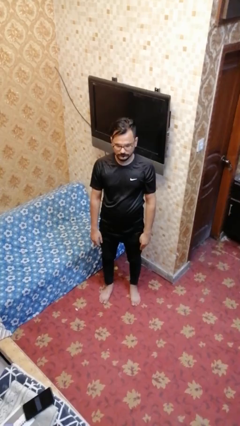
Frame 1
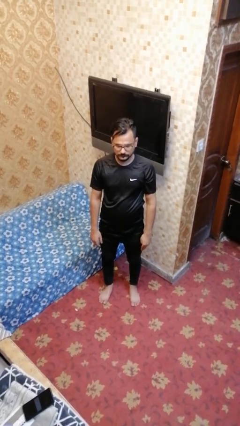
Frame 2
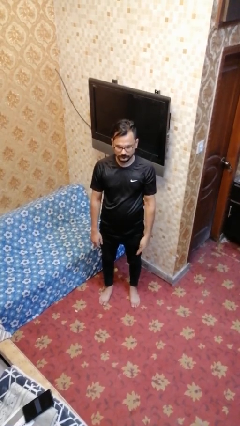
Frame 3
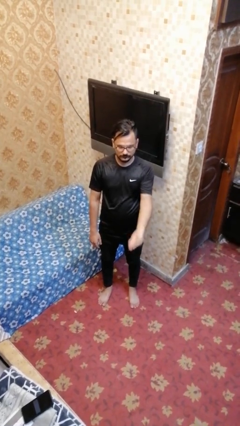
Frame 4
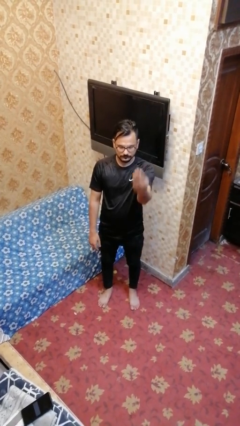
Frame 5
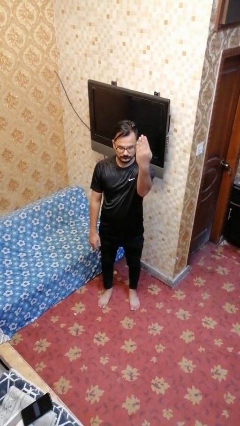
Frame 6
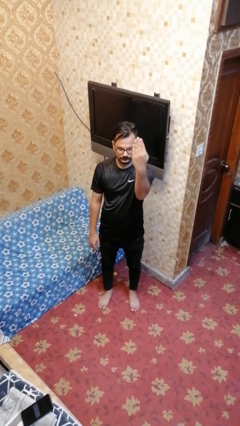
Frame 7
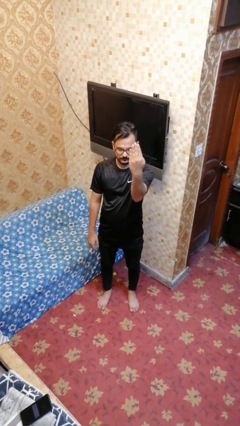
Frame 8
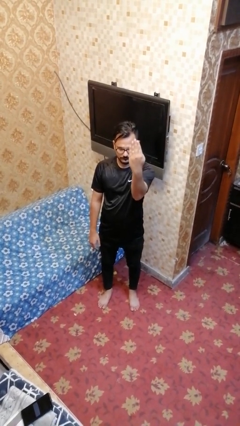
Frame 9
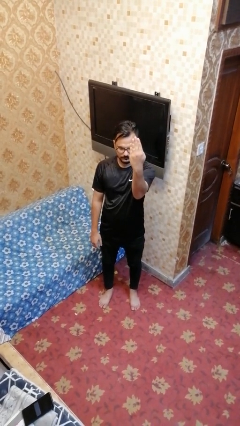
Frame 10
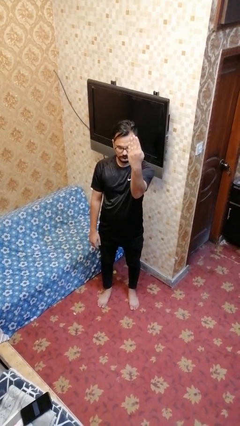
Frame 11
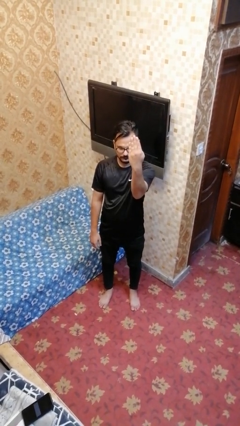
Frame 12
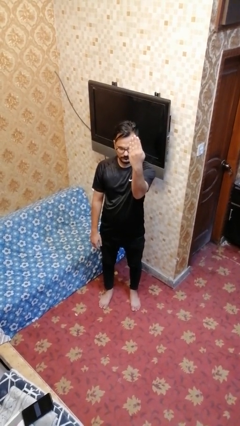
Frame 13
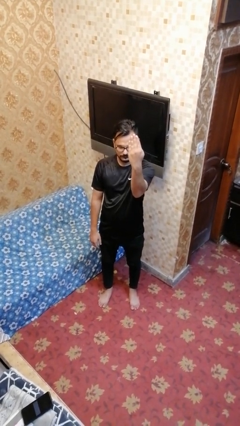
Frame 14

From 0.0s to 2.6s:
person gestures number four

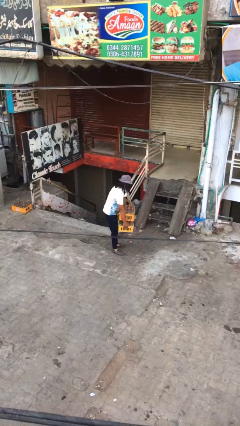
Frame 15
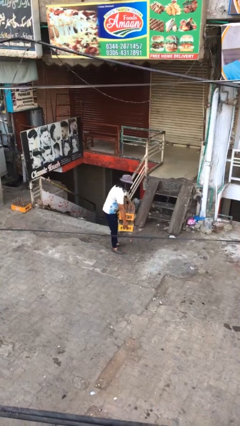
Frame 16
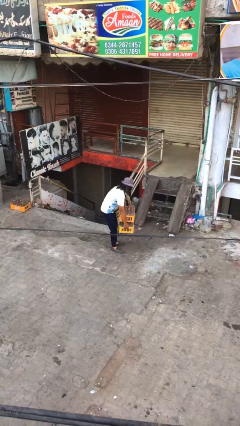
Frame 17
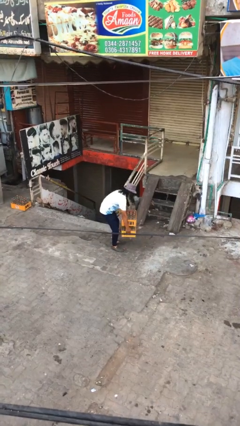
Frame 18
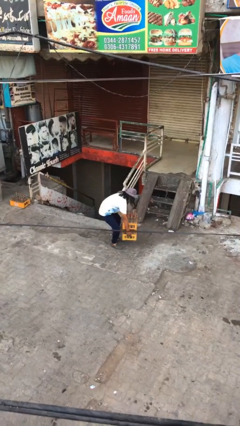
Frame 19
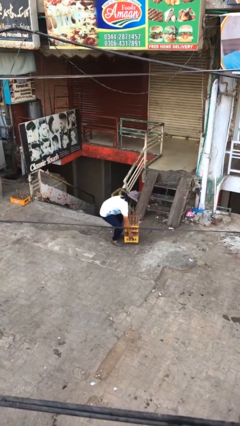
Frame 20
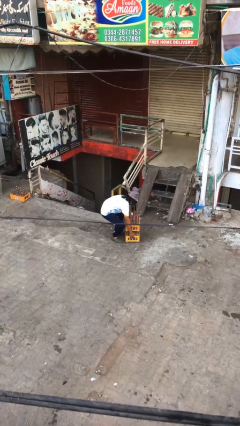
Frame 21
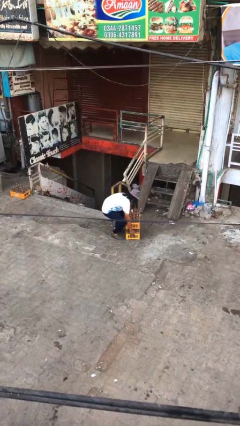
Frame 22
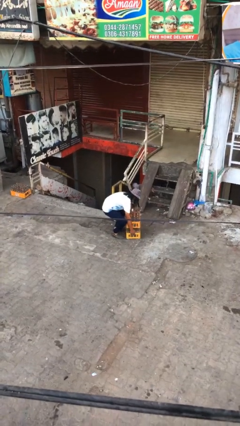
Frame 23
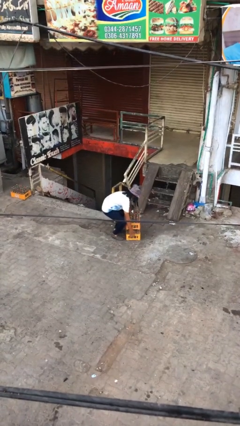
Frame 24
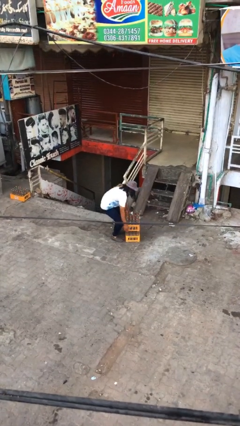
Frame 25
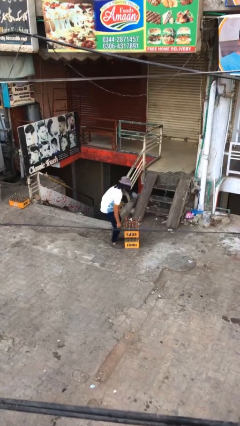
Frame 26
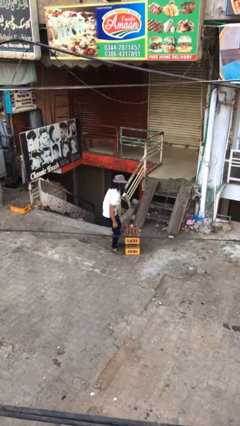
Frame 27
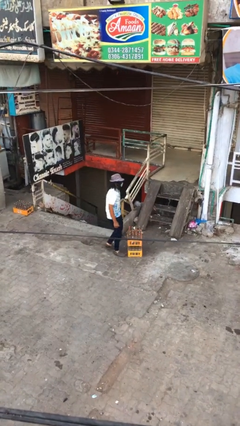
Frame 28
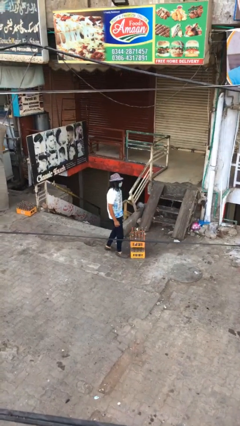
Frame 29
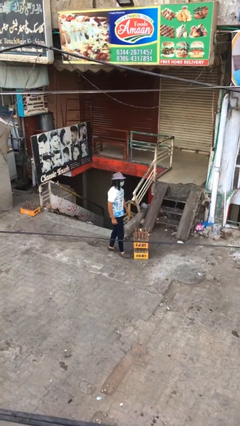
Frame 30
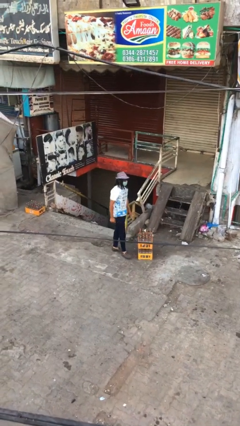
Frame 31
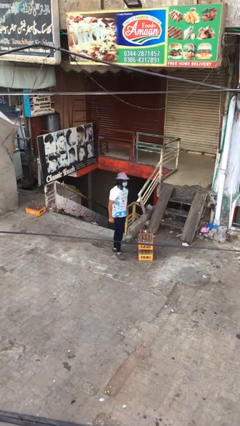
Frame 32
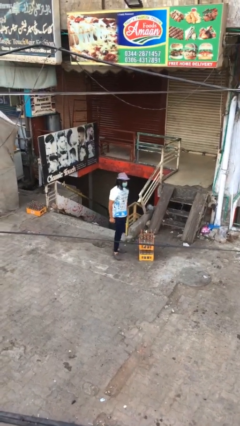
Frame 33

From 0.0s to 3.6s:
person puts down object on floor

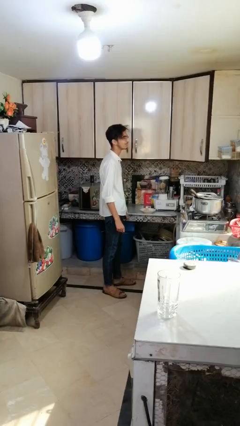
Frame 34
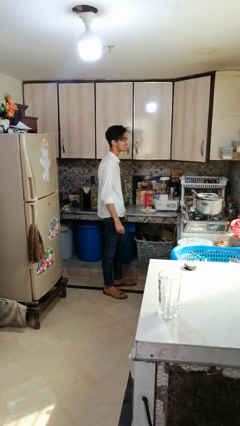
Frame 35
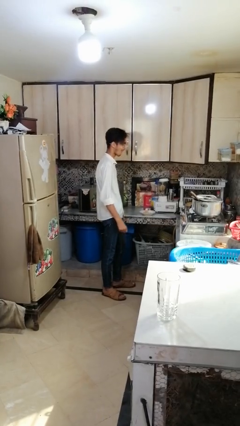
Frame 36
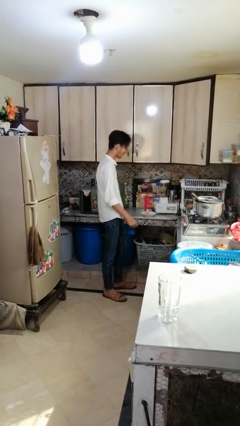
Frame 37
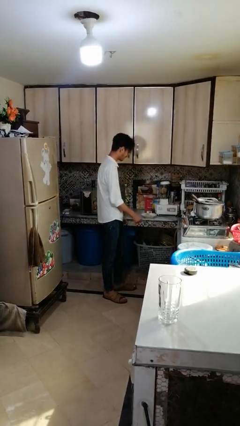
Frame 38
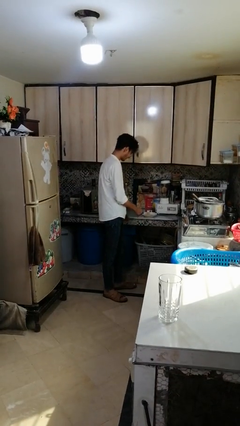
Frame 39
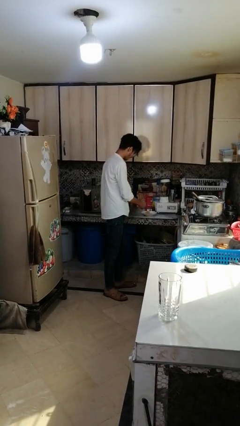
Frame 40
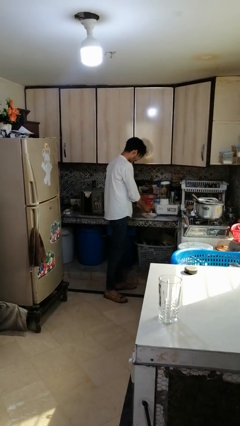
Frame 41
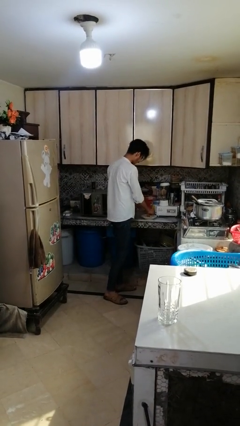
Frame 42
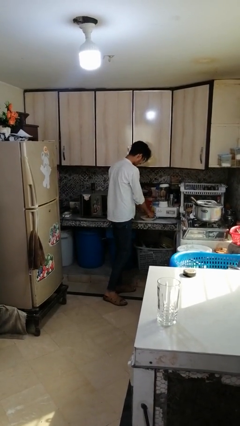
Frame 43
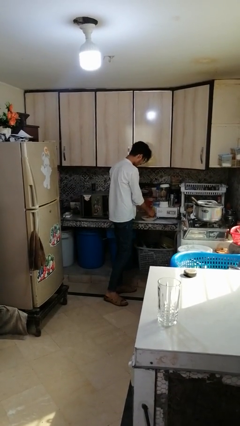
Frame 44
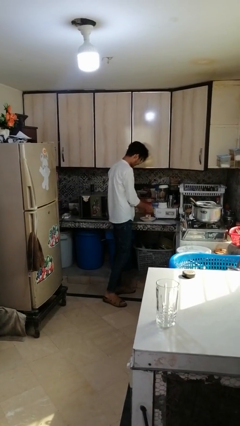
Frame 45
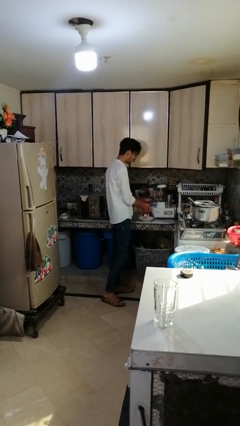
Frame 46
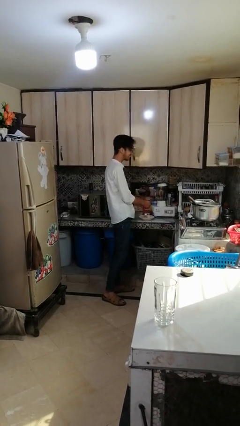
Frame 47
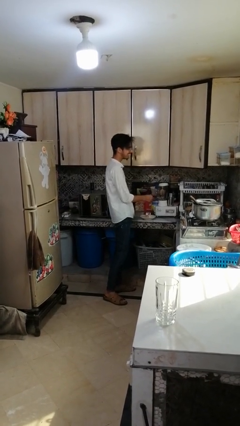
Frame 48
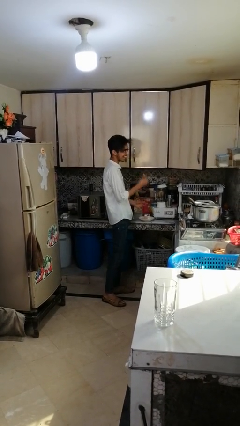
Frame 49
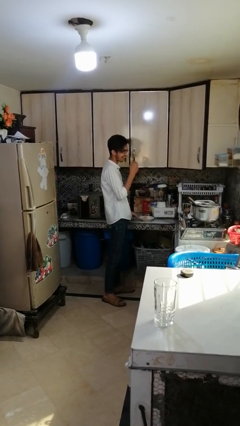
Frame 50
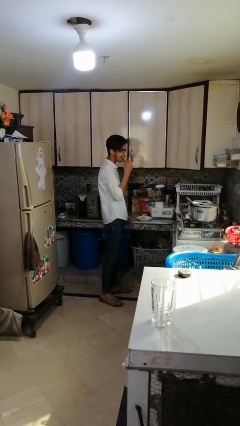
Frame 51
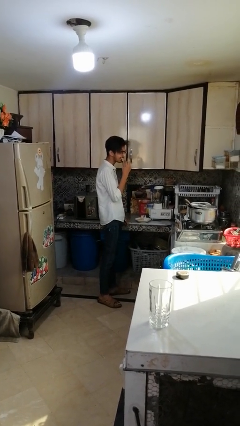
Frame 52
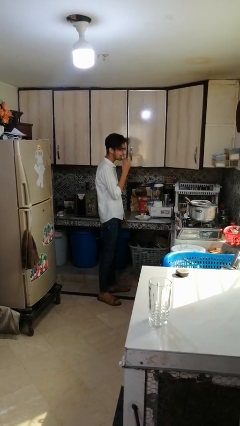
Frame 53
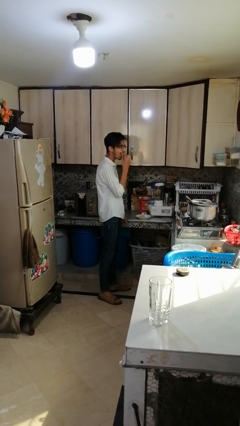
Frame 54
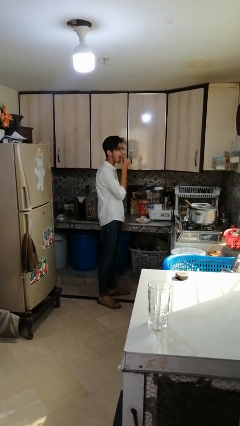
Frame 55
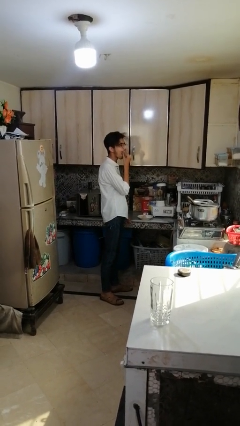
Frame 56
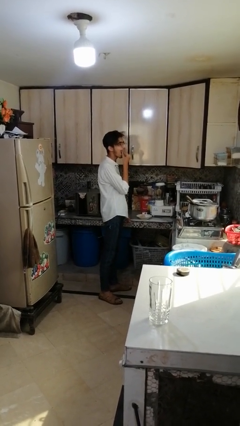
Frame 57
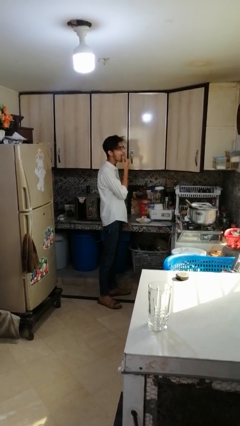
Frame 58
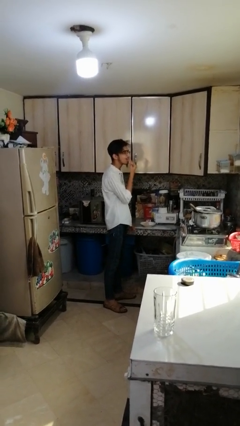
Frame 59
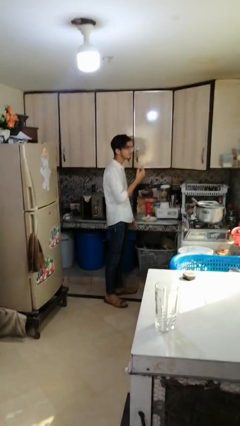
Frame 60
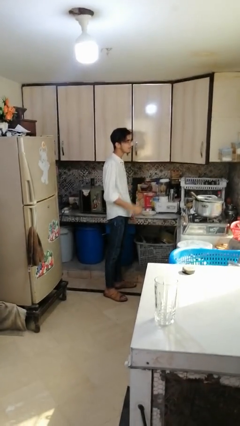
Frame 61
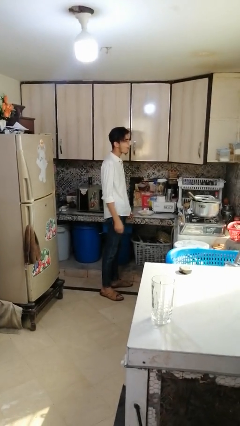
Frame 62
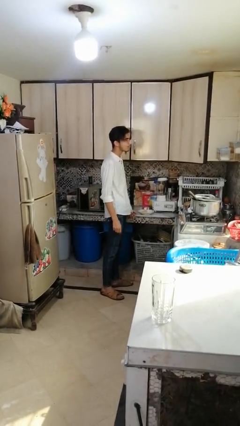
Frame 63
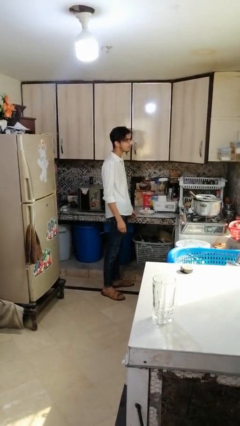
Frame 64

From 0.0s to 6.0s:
person eats with hands

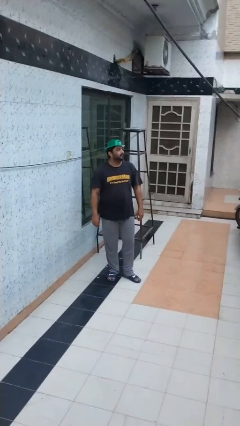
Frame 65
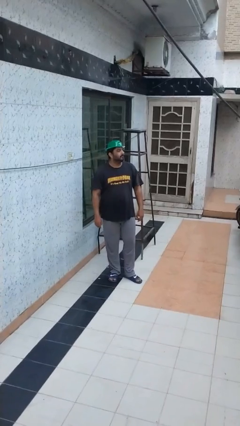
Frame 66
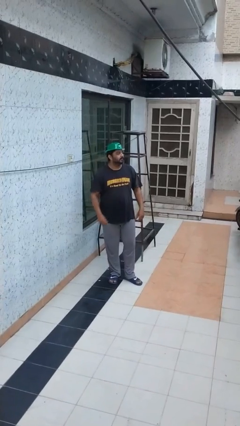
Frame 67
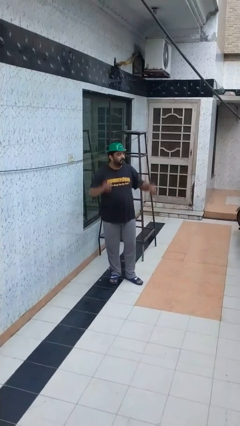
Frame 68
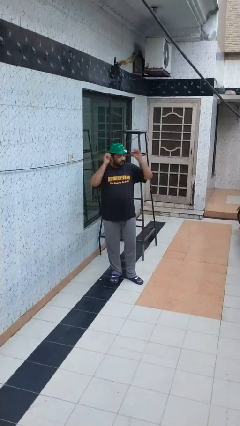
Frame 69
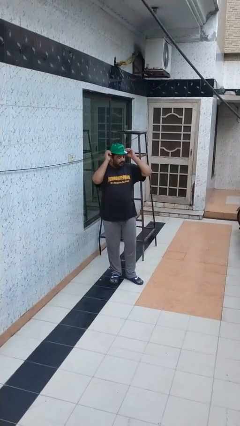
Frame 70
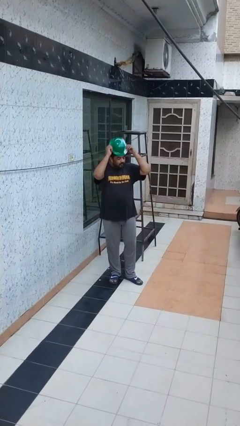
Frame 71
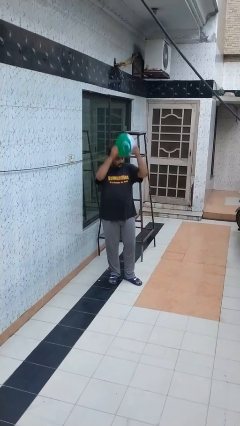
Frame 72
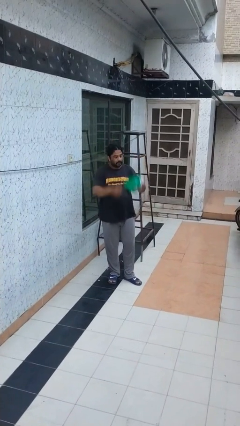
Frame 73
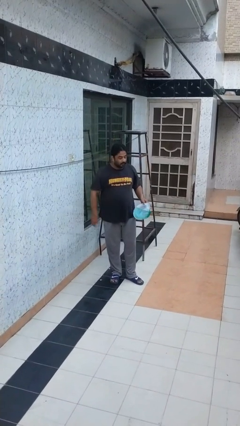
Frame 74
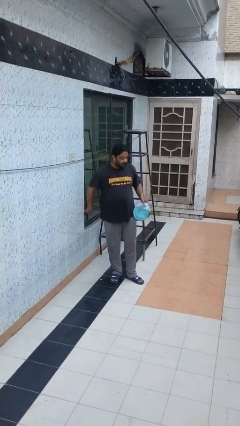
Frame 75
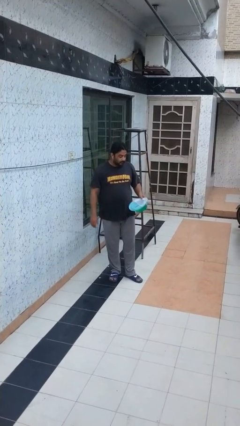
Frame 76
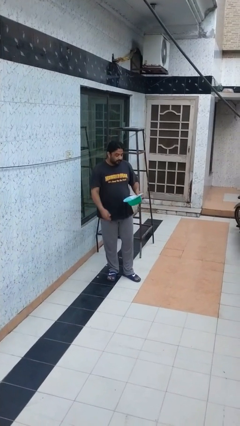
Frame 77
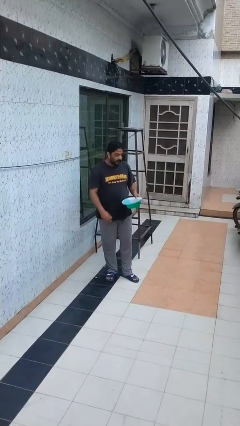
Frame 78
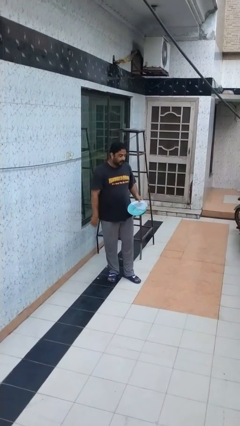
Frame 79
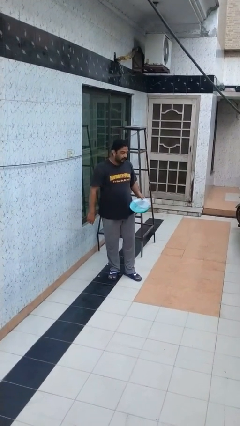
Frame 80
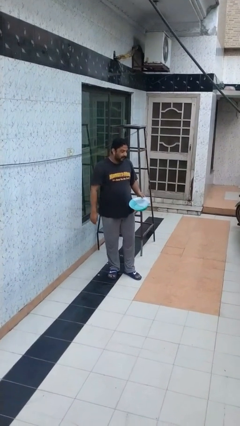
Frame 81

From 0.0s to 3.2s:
person takes off hat

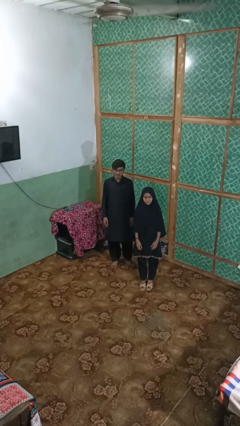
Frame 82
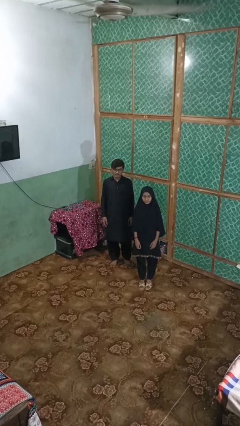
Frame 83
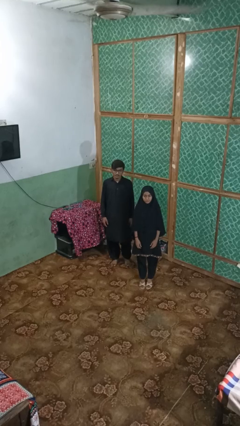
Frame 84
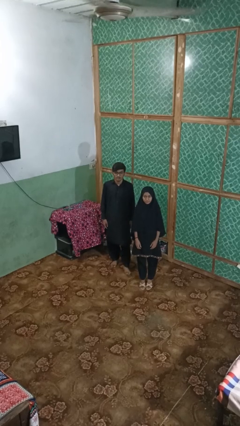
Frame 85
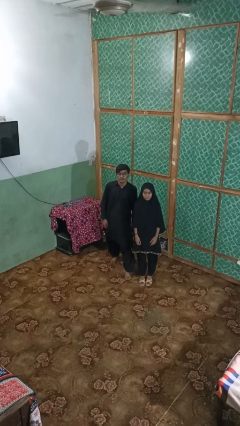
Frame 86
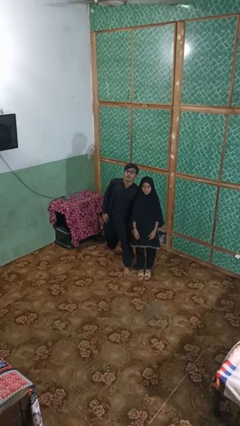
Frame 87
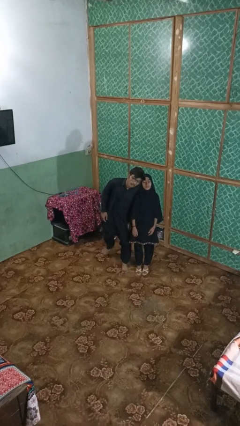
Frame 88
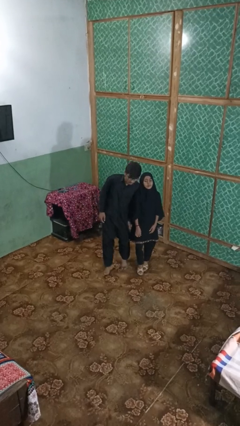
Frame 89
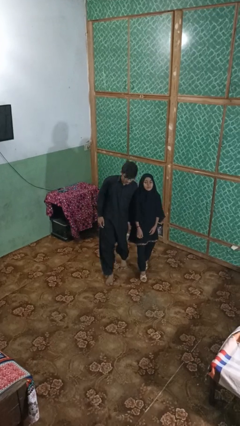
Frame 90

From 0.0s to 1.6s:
person shoves person

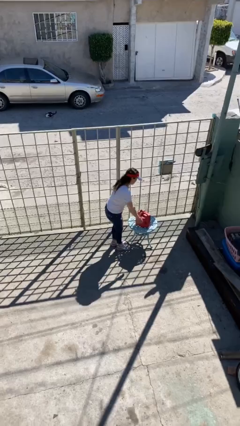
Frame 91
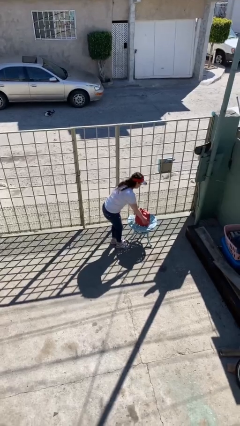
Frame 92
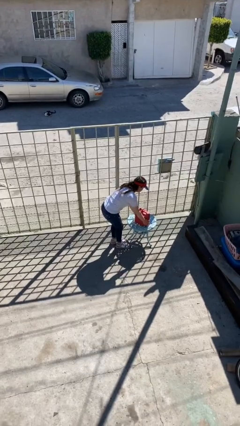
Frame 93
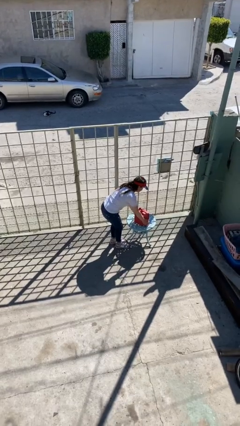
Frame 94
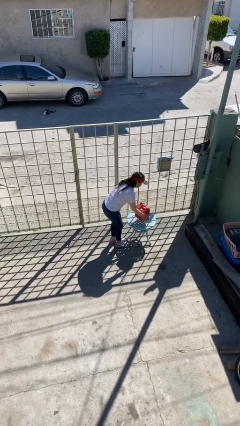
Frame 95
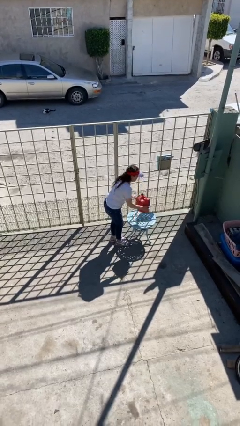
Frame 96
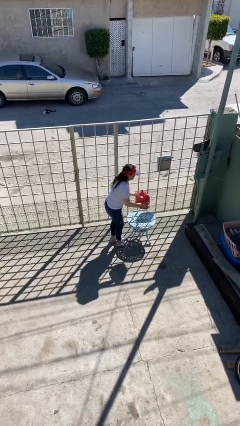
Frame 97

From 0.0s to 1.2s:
person picks up object from table
